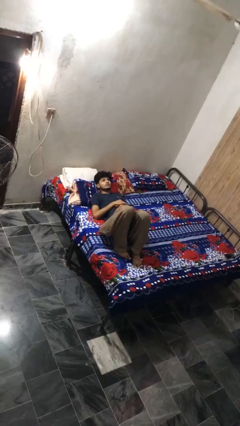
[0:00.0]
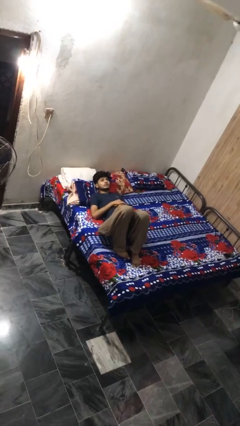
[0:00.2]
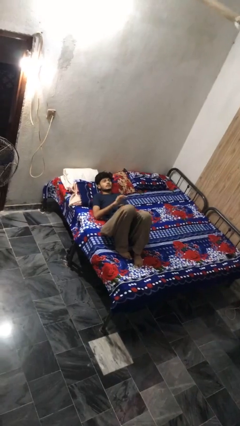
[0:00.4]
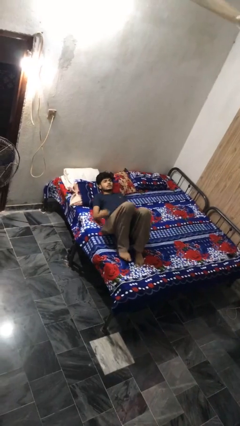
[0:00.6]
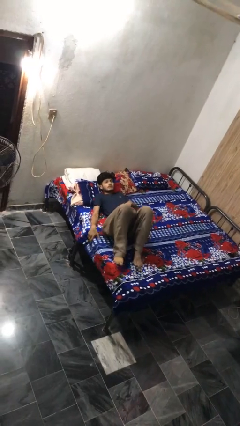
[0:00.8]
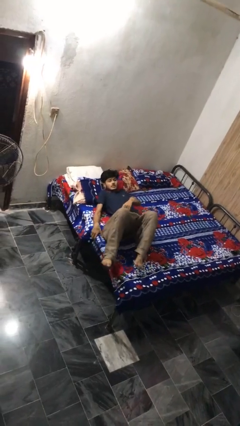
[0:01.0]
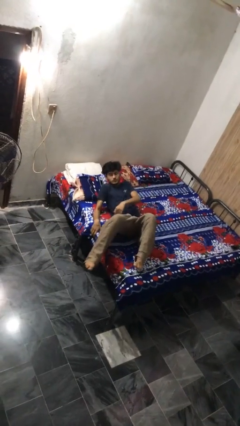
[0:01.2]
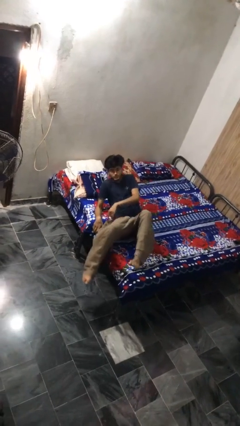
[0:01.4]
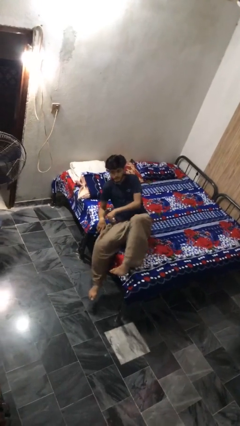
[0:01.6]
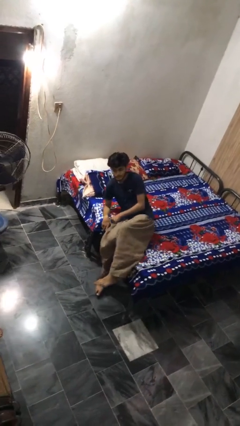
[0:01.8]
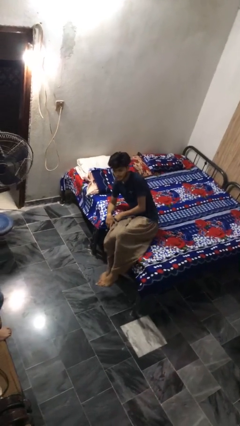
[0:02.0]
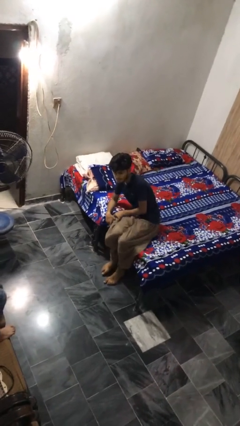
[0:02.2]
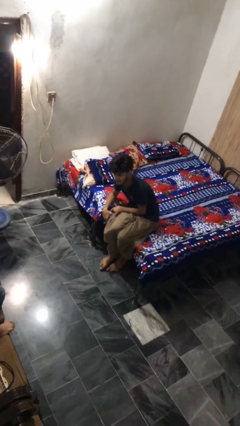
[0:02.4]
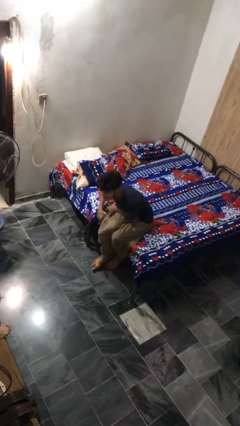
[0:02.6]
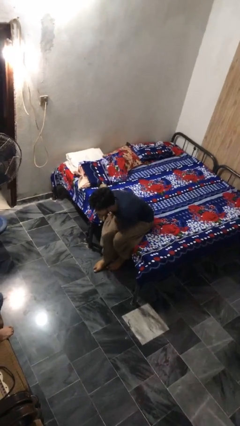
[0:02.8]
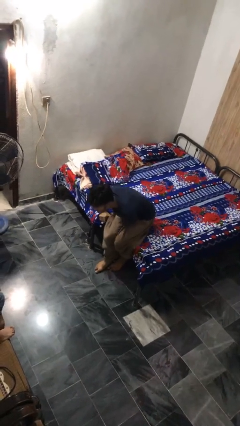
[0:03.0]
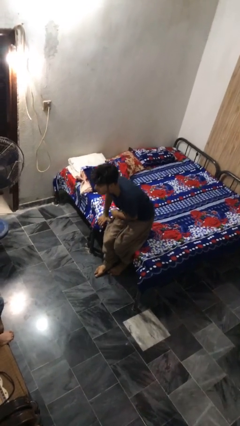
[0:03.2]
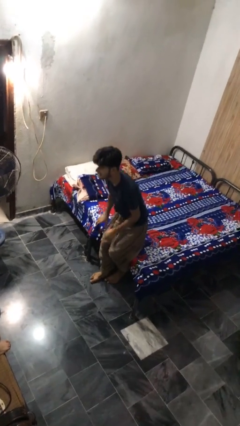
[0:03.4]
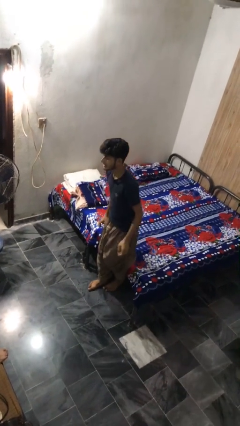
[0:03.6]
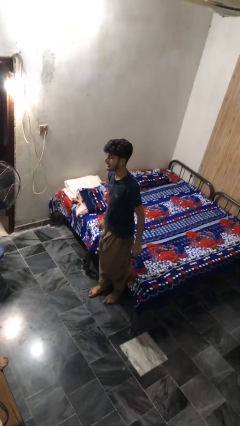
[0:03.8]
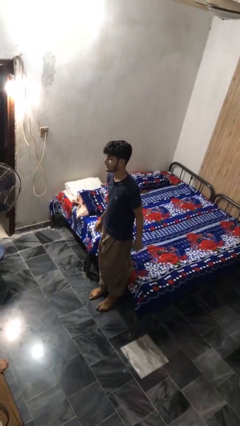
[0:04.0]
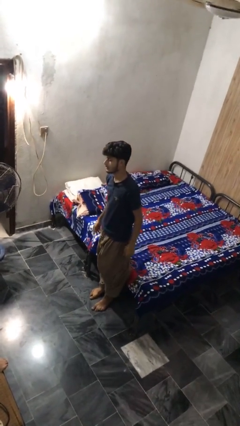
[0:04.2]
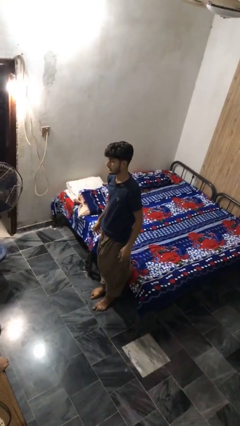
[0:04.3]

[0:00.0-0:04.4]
person stands up

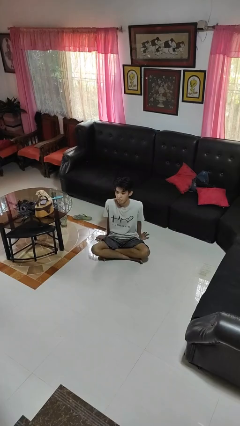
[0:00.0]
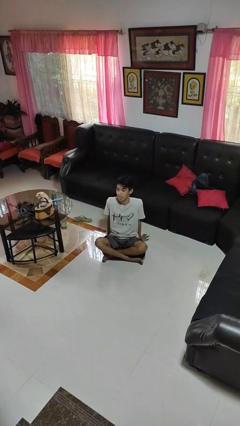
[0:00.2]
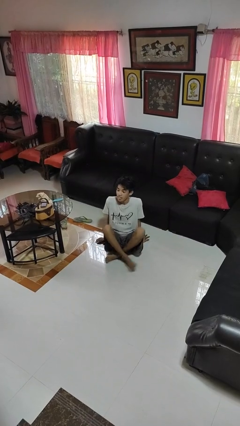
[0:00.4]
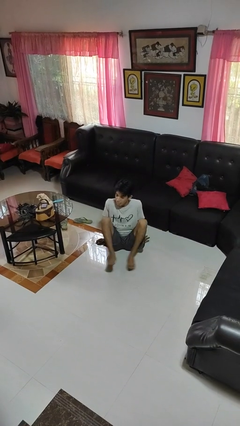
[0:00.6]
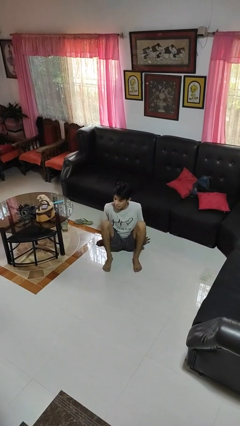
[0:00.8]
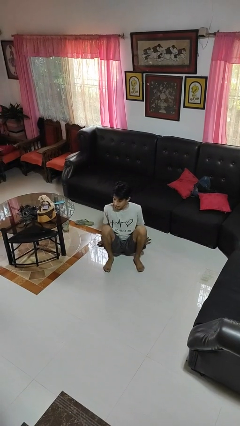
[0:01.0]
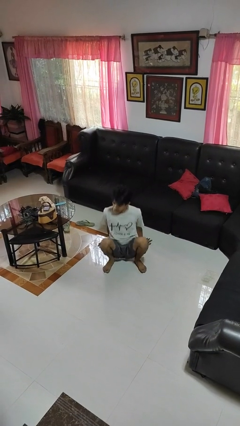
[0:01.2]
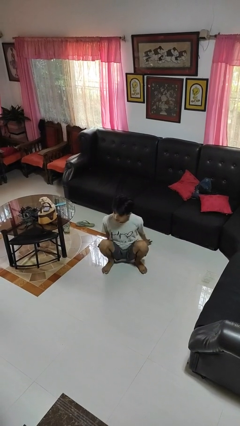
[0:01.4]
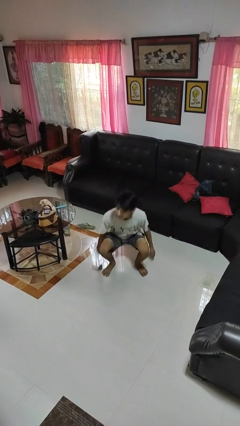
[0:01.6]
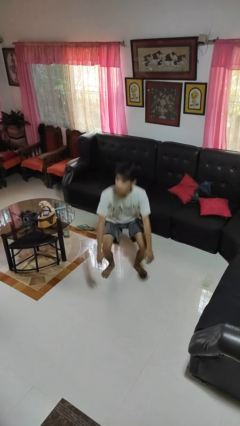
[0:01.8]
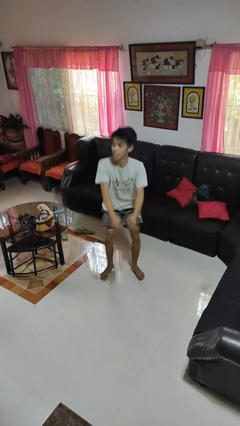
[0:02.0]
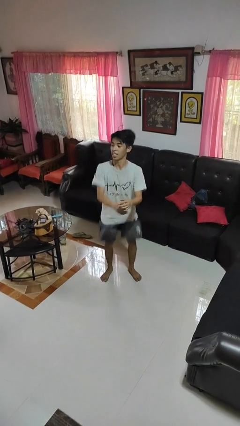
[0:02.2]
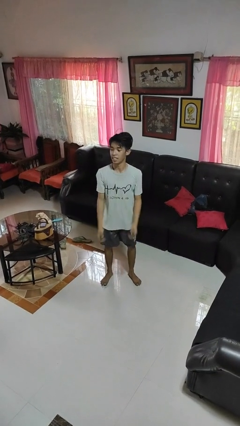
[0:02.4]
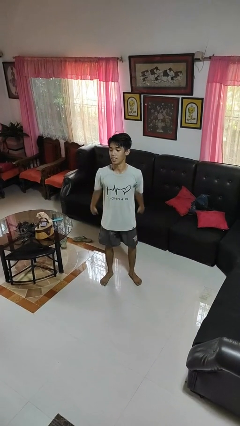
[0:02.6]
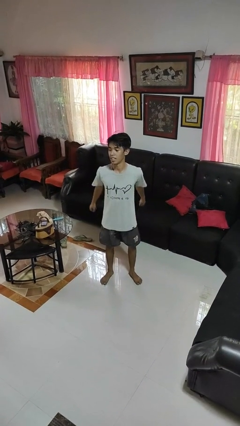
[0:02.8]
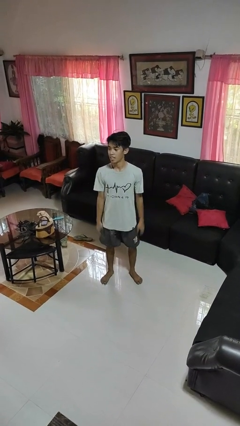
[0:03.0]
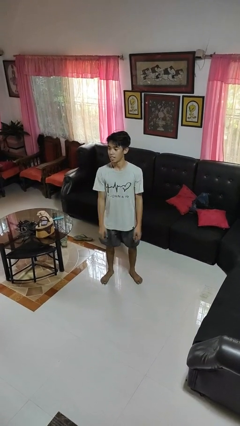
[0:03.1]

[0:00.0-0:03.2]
person stands up from floor

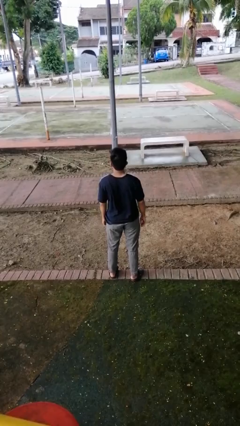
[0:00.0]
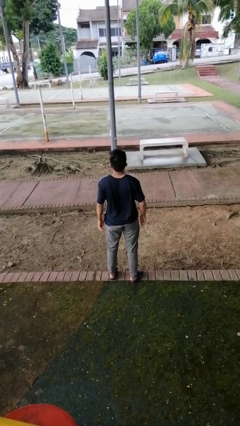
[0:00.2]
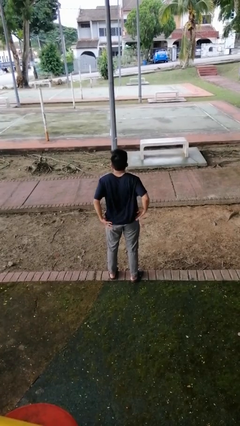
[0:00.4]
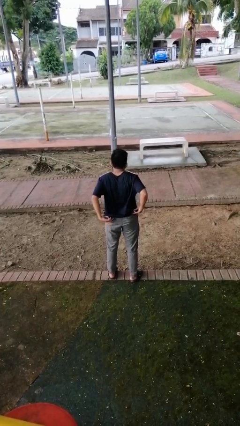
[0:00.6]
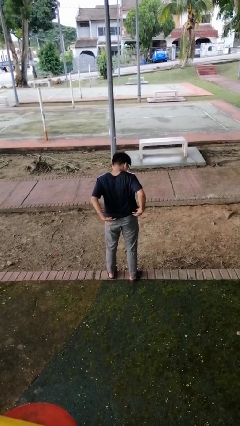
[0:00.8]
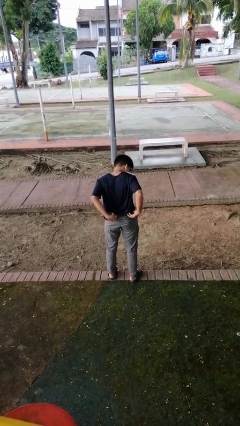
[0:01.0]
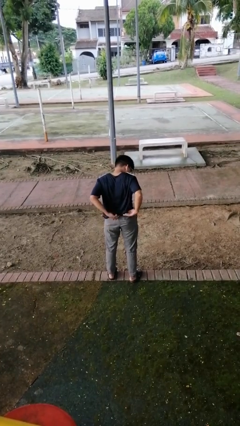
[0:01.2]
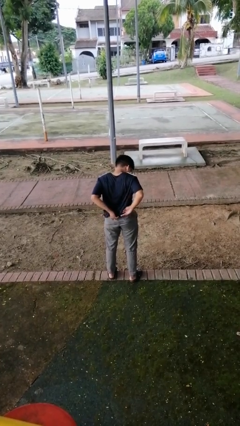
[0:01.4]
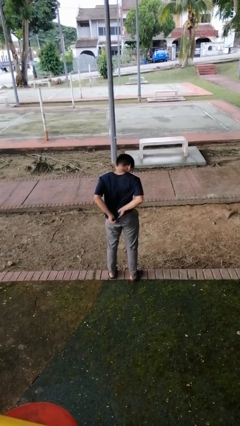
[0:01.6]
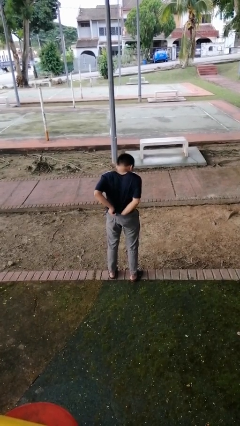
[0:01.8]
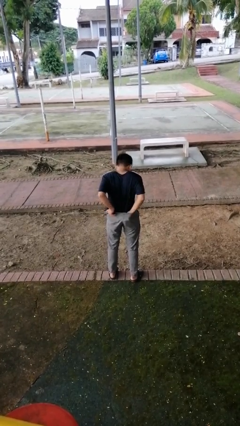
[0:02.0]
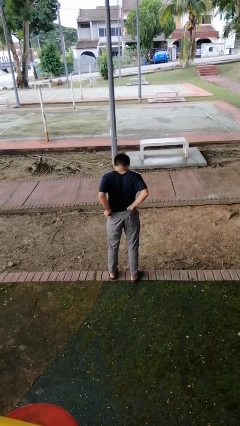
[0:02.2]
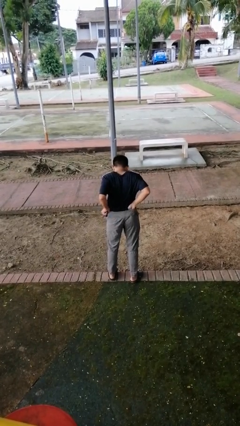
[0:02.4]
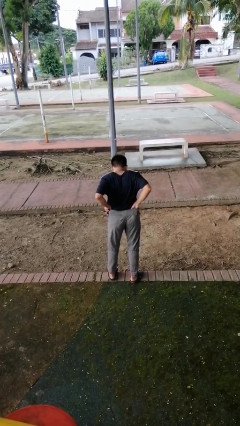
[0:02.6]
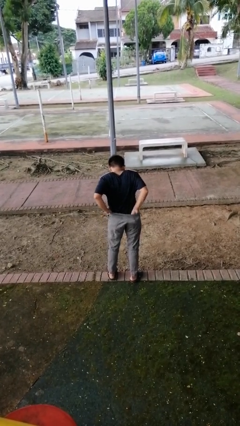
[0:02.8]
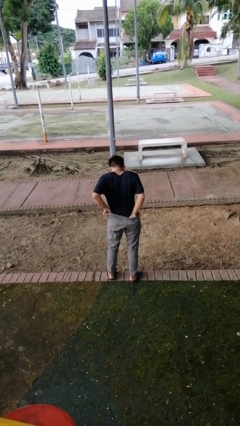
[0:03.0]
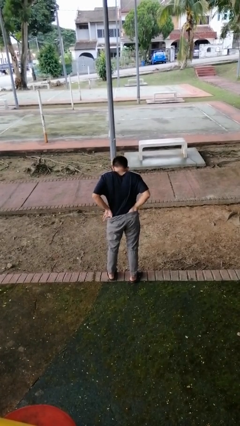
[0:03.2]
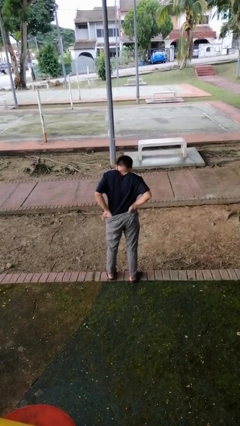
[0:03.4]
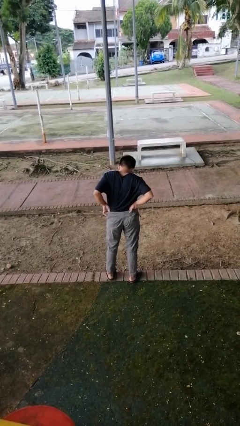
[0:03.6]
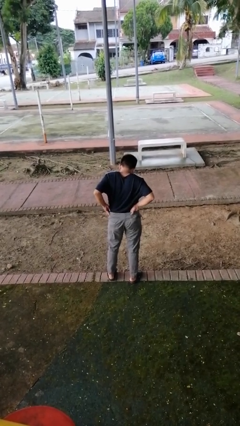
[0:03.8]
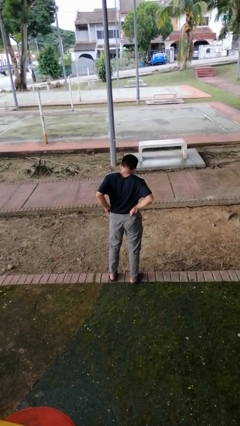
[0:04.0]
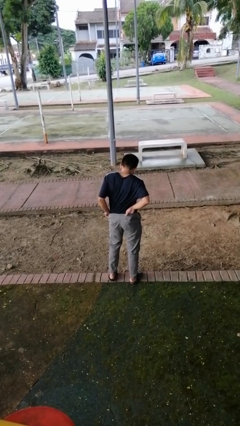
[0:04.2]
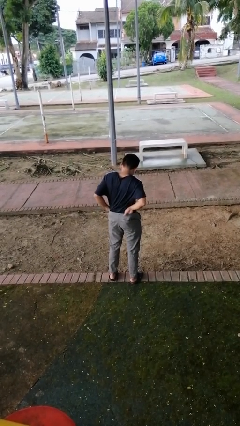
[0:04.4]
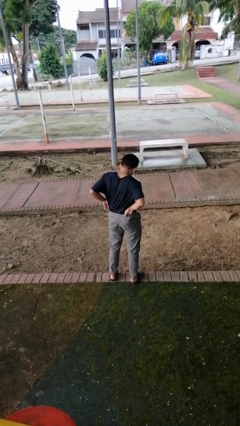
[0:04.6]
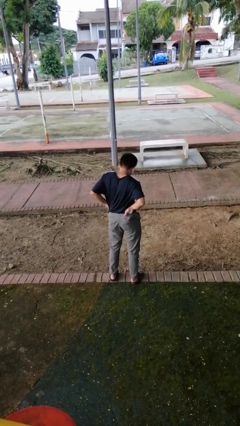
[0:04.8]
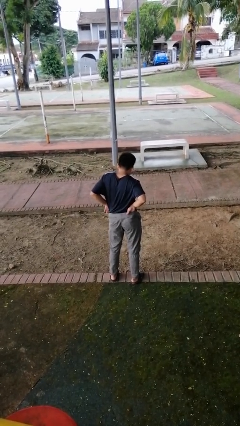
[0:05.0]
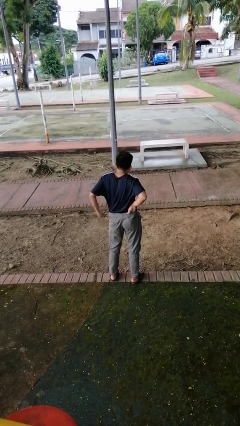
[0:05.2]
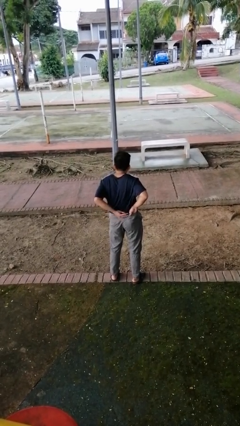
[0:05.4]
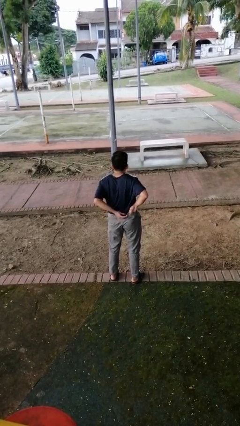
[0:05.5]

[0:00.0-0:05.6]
person tucks in shirt

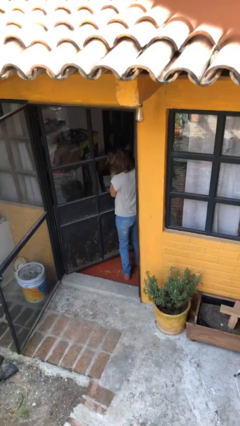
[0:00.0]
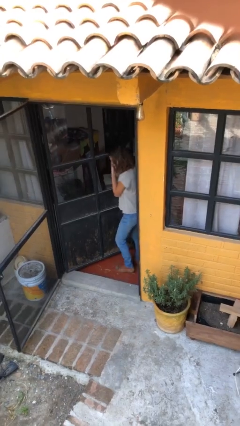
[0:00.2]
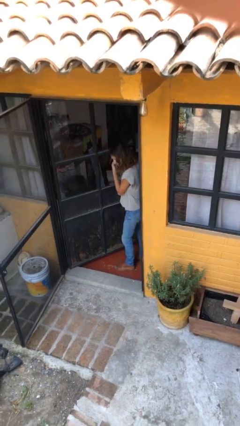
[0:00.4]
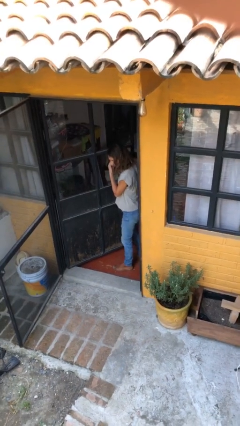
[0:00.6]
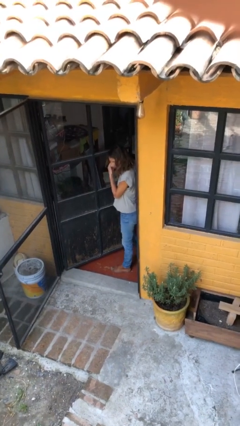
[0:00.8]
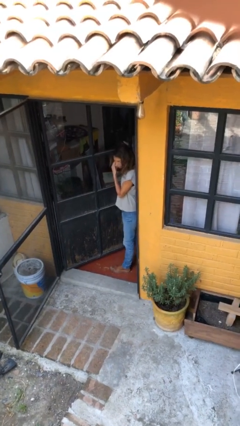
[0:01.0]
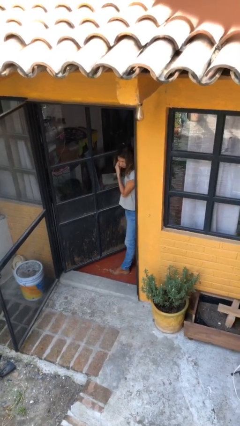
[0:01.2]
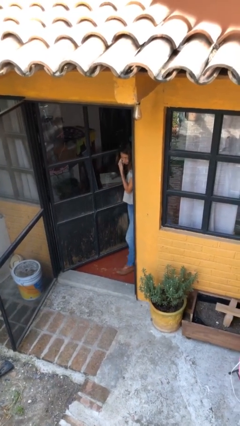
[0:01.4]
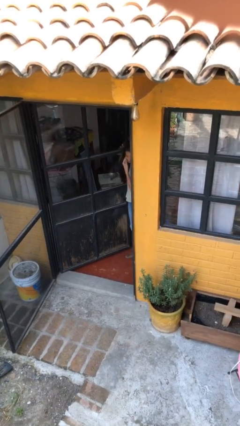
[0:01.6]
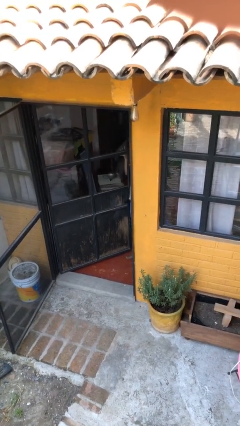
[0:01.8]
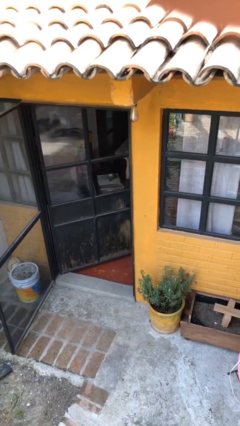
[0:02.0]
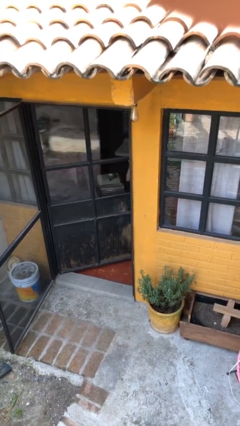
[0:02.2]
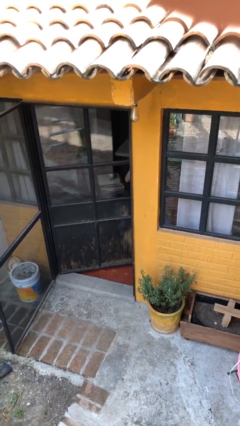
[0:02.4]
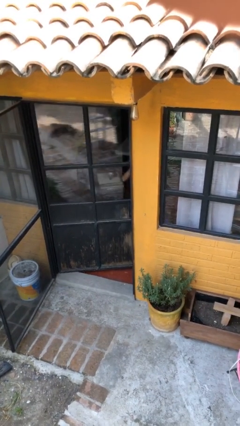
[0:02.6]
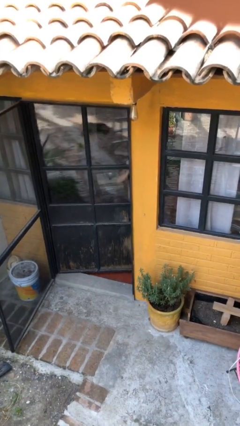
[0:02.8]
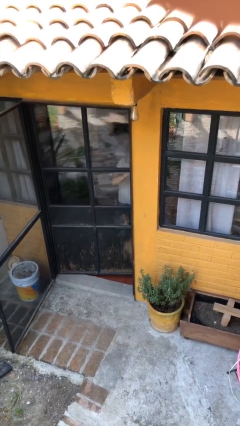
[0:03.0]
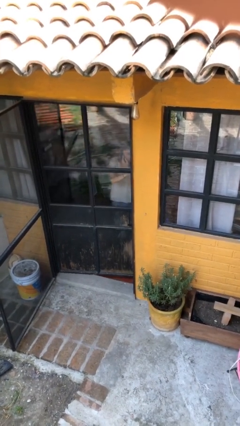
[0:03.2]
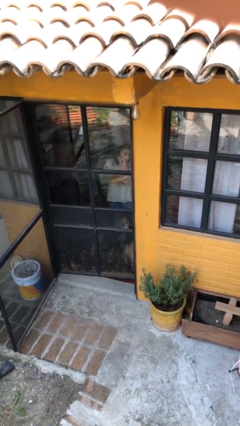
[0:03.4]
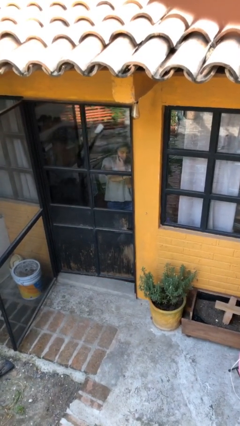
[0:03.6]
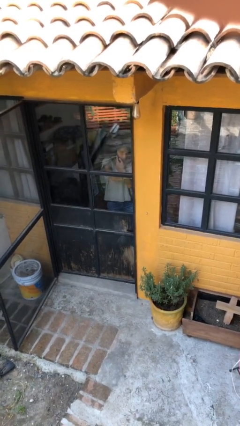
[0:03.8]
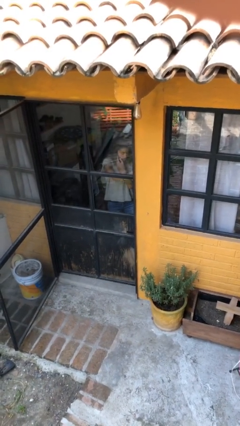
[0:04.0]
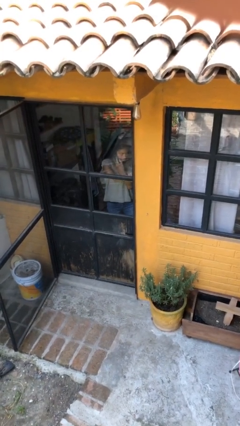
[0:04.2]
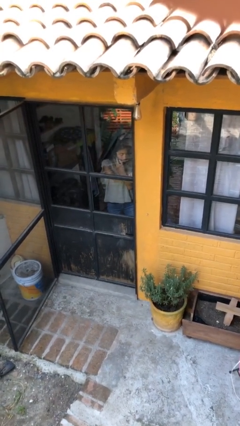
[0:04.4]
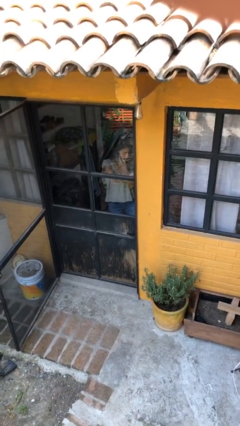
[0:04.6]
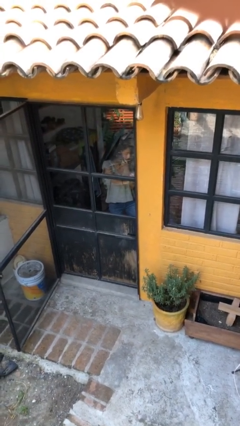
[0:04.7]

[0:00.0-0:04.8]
person closes facility door
